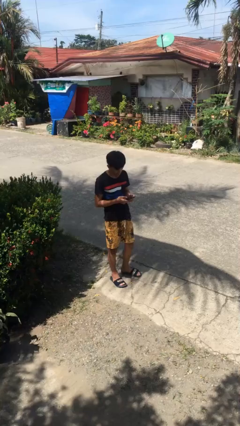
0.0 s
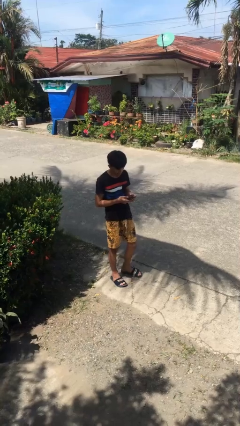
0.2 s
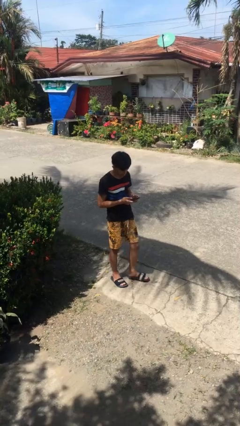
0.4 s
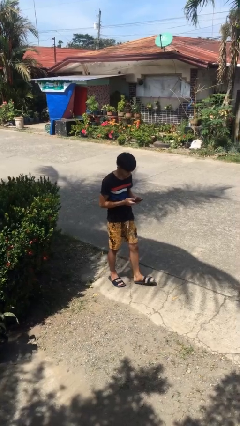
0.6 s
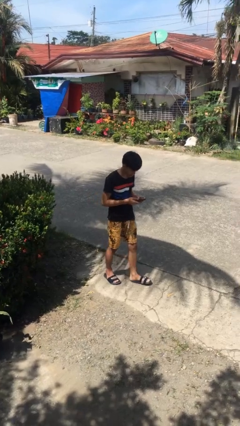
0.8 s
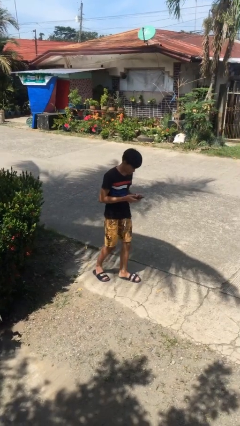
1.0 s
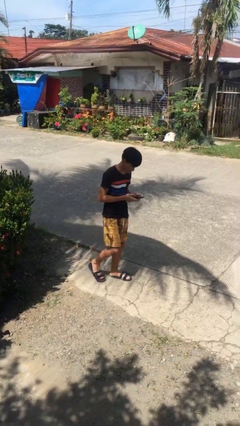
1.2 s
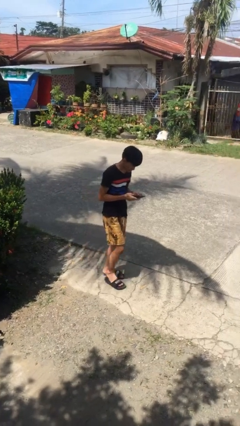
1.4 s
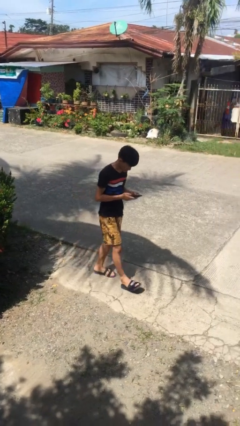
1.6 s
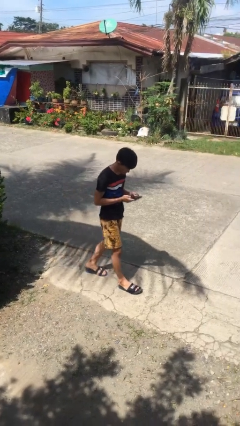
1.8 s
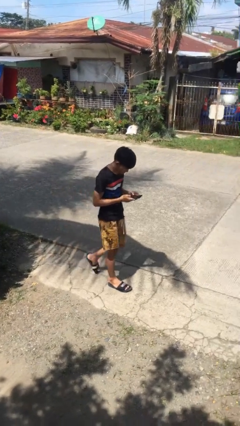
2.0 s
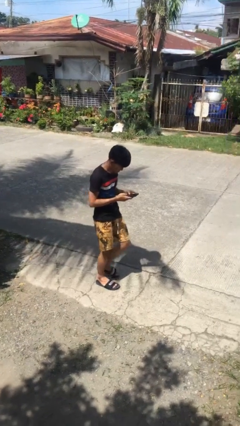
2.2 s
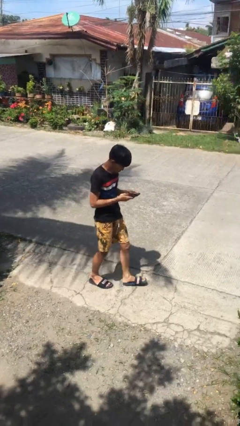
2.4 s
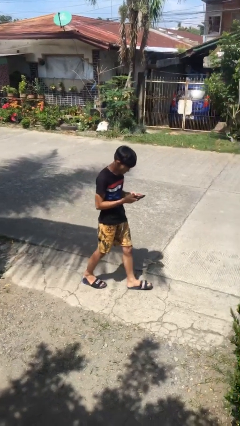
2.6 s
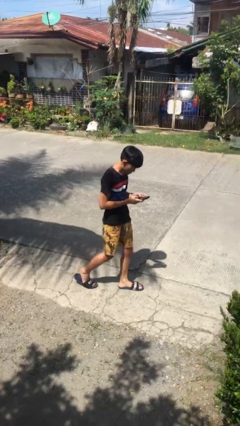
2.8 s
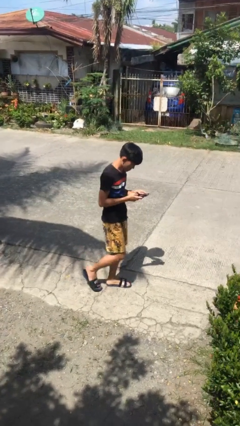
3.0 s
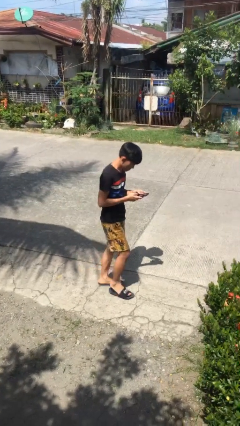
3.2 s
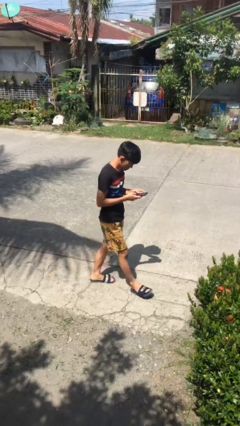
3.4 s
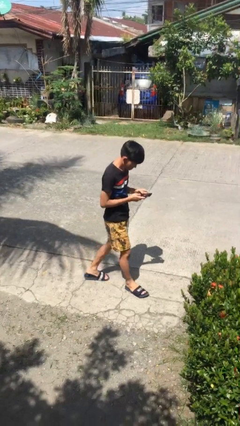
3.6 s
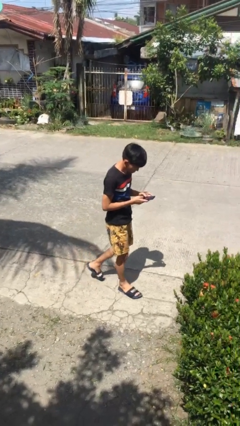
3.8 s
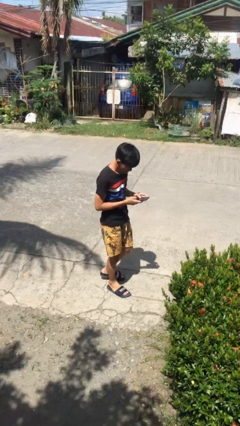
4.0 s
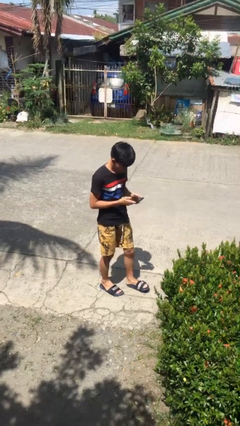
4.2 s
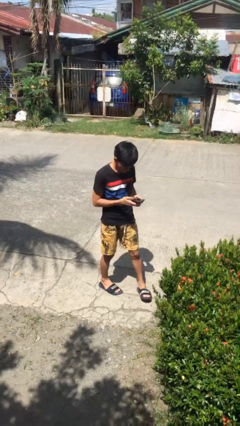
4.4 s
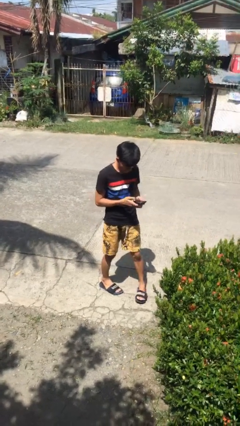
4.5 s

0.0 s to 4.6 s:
person texts on phone

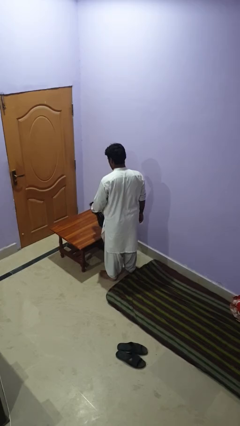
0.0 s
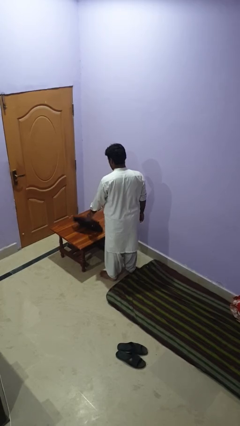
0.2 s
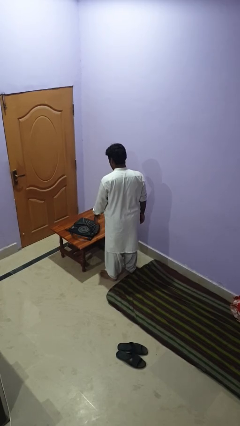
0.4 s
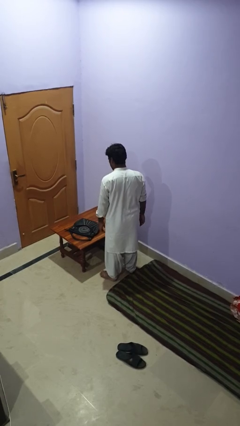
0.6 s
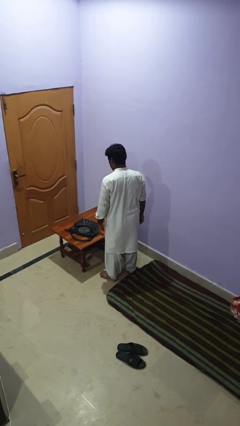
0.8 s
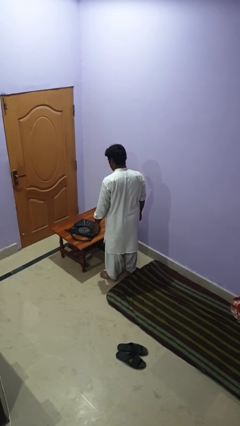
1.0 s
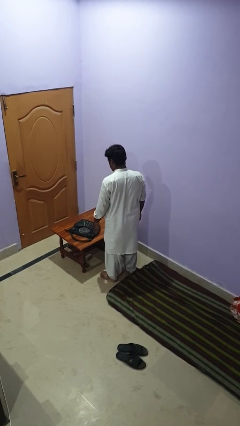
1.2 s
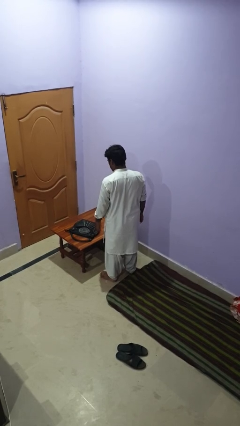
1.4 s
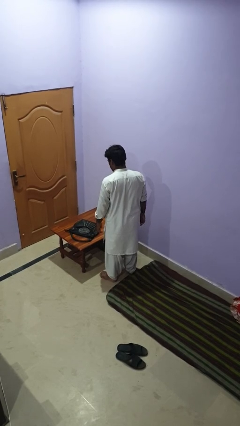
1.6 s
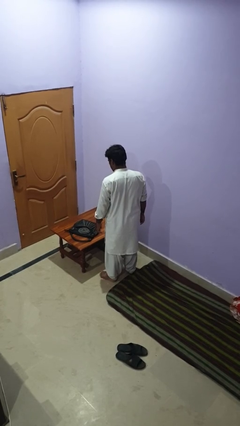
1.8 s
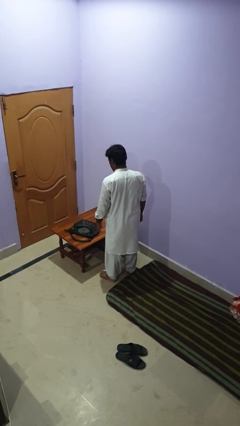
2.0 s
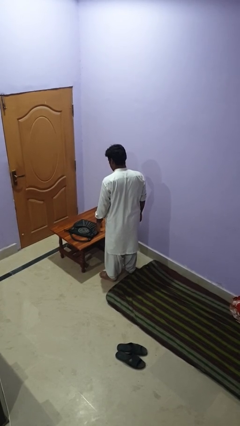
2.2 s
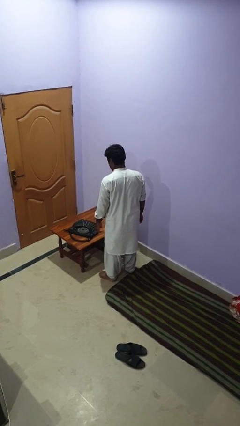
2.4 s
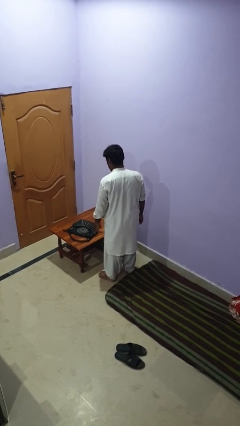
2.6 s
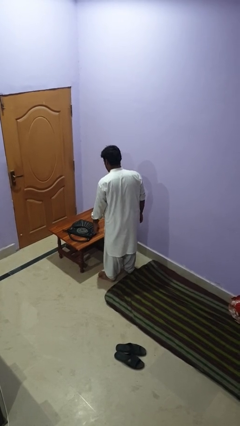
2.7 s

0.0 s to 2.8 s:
person throws object on table

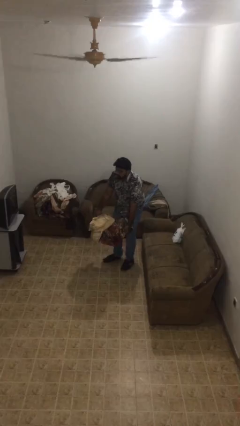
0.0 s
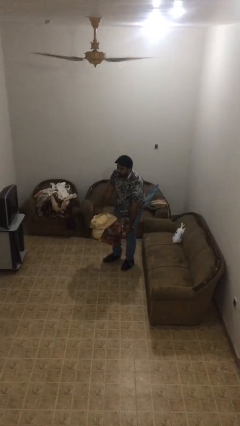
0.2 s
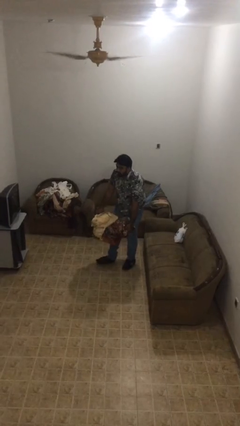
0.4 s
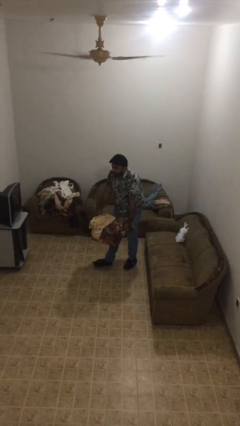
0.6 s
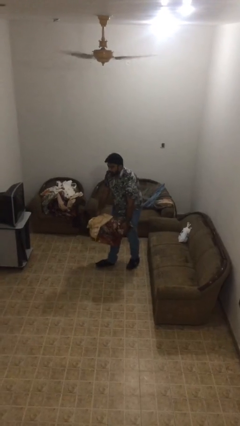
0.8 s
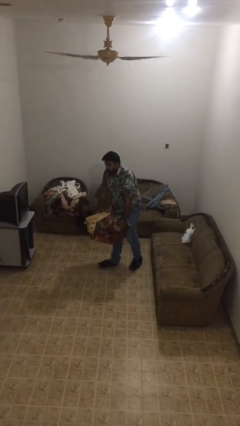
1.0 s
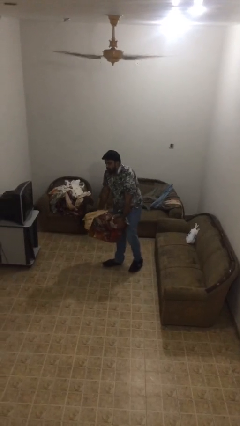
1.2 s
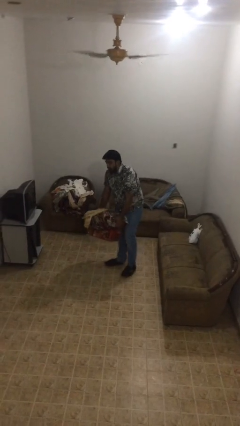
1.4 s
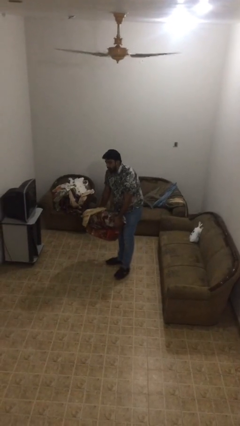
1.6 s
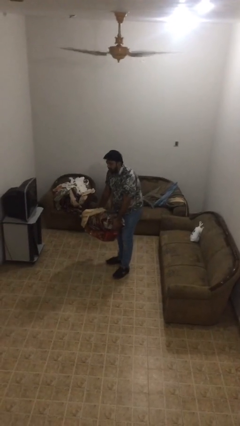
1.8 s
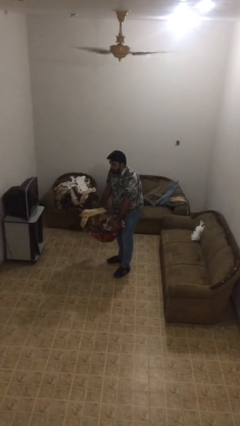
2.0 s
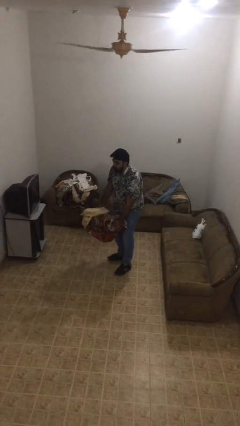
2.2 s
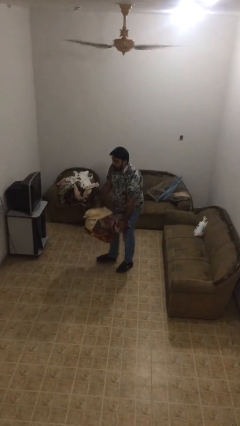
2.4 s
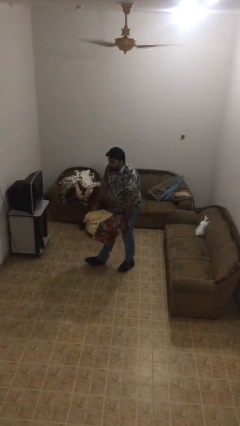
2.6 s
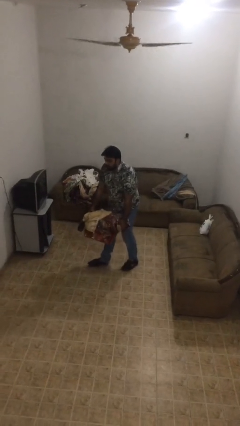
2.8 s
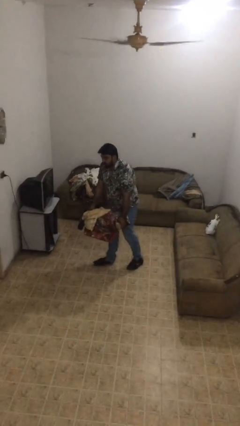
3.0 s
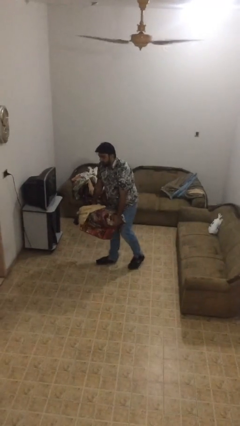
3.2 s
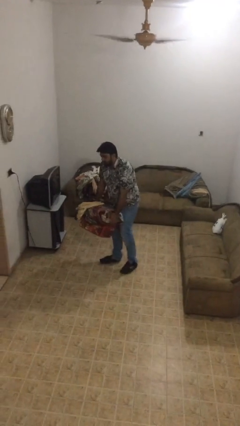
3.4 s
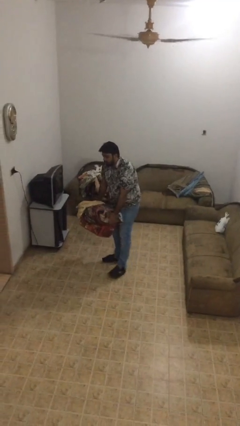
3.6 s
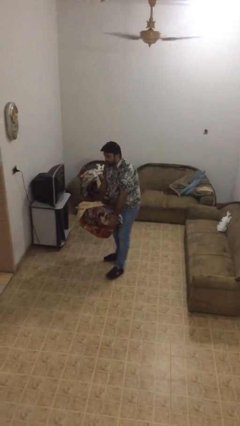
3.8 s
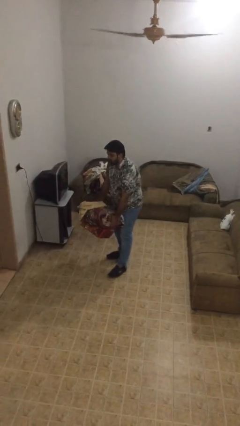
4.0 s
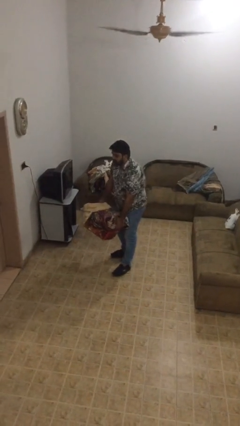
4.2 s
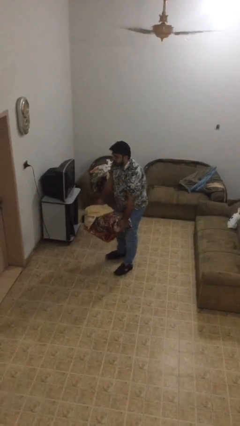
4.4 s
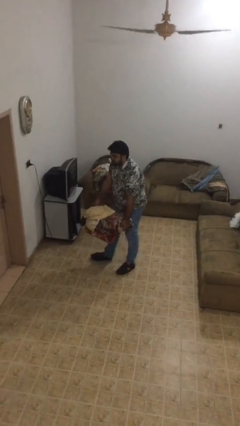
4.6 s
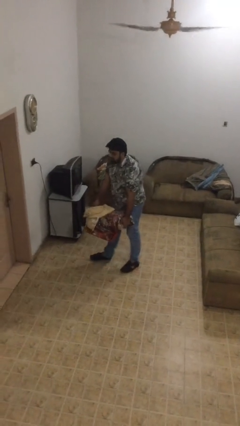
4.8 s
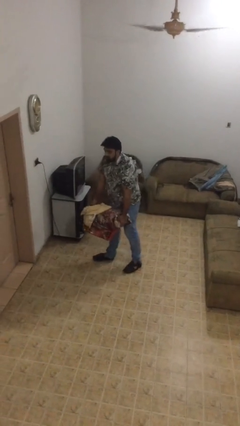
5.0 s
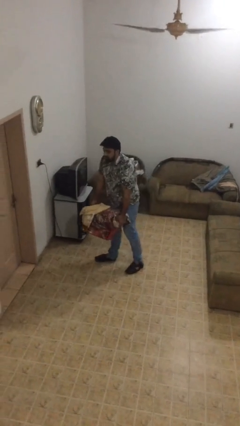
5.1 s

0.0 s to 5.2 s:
person carries heavy object

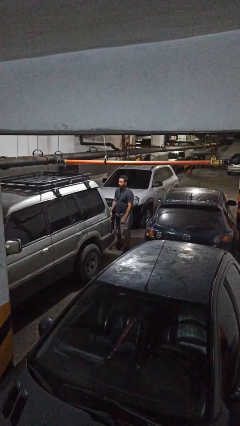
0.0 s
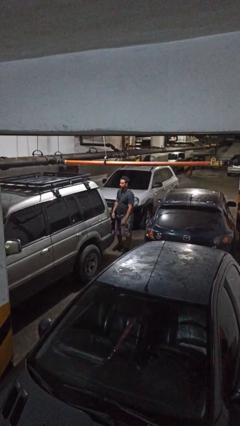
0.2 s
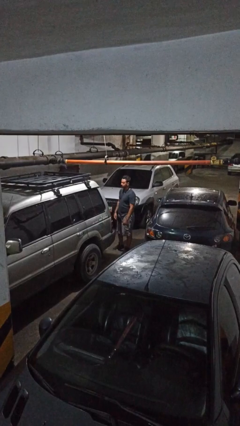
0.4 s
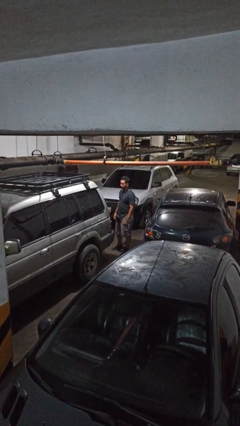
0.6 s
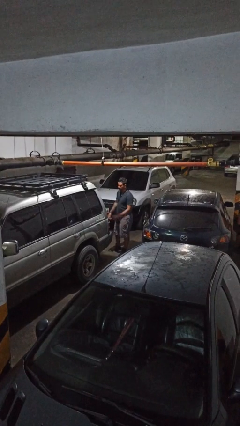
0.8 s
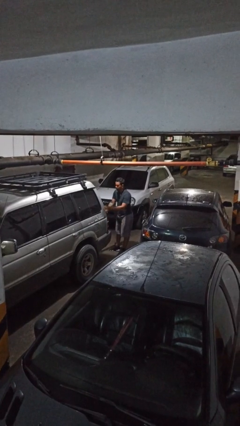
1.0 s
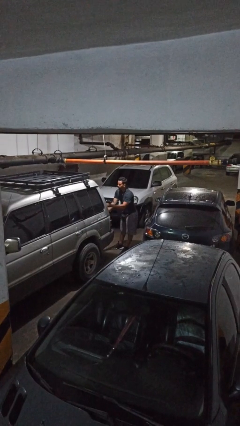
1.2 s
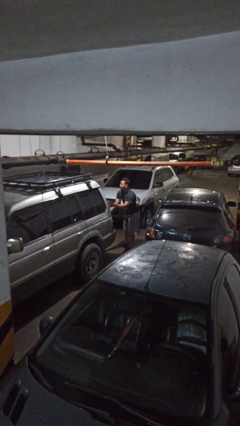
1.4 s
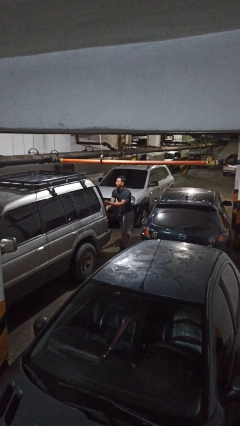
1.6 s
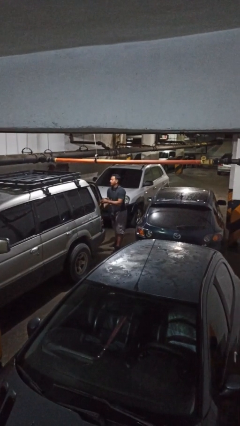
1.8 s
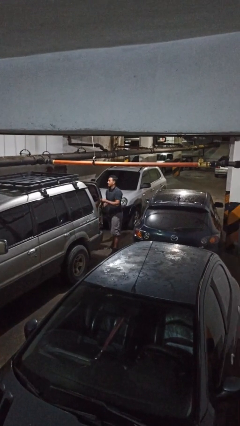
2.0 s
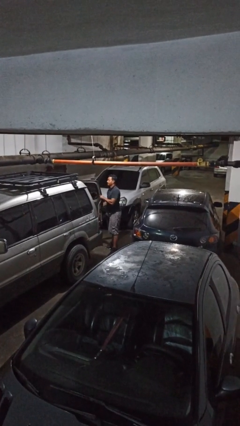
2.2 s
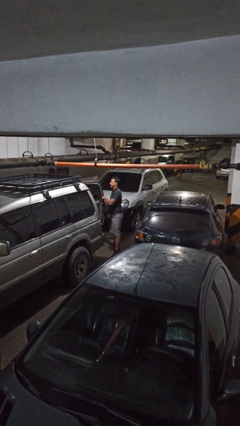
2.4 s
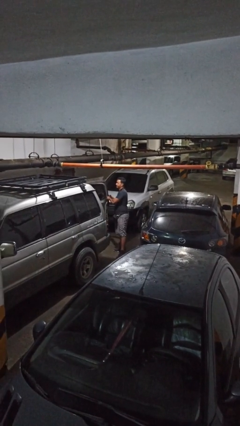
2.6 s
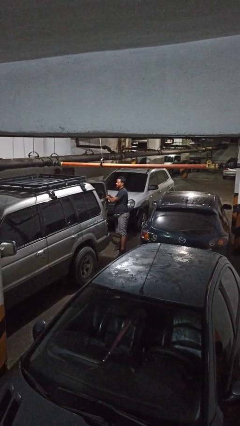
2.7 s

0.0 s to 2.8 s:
person opens car trunk

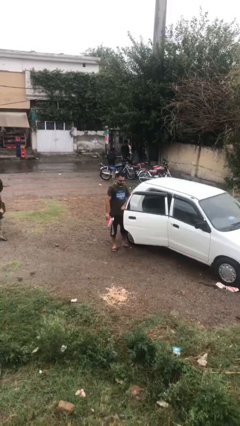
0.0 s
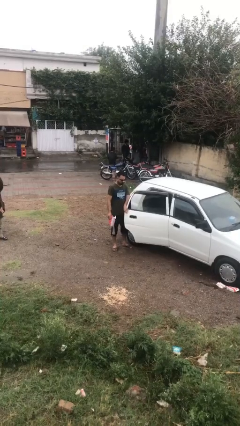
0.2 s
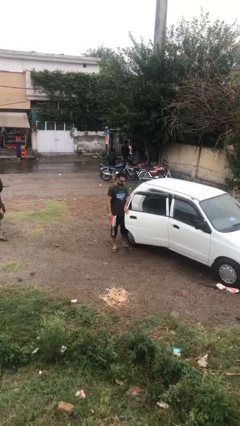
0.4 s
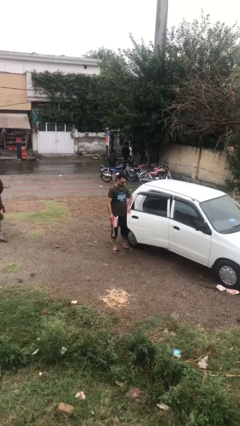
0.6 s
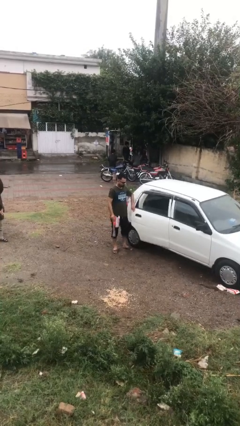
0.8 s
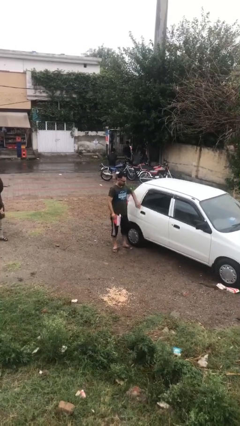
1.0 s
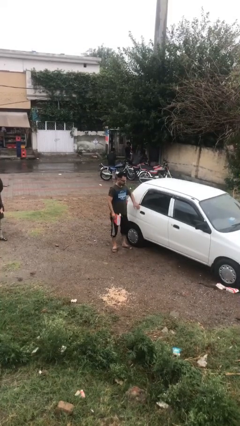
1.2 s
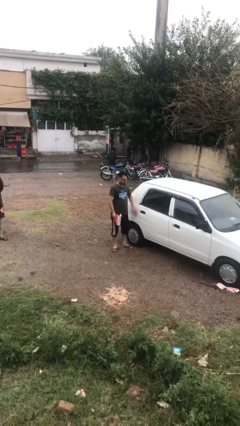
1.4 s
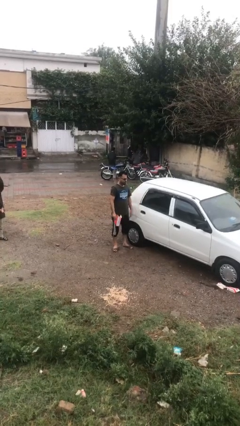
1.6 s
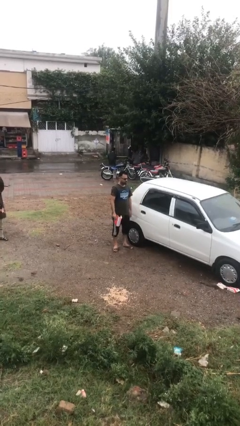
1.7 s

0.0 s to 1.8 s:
person closes car door

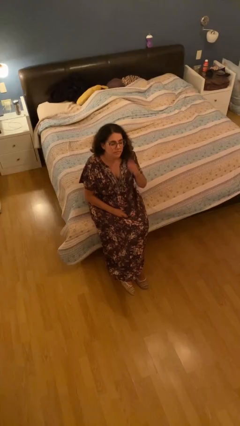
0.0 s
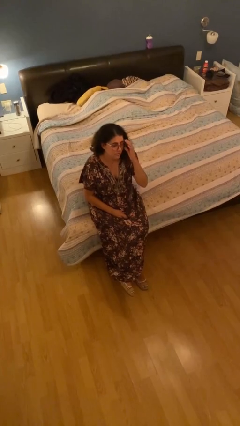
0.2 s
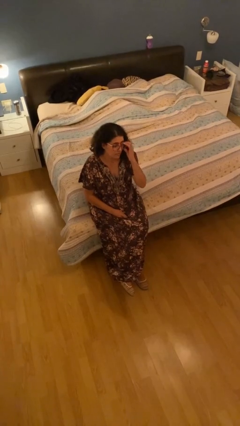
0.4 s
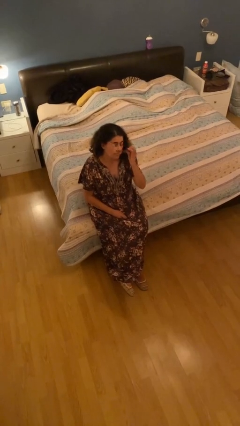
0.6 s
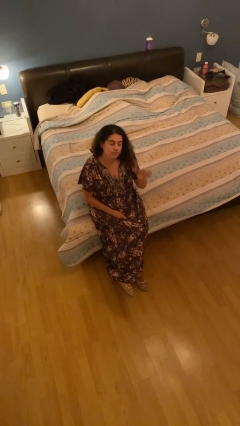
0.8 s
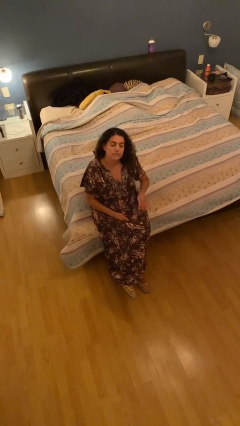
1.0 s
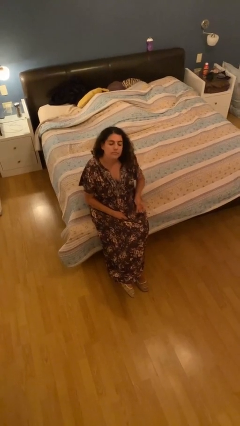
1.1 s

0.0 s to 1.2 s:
person takes off glasses
